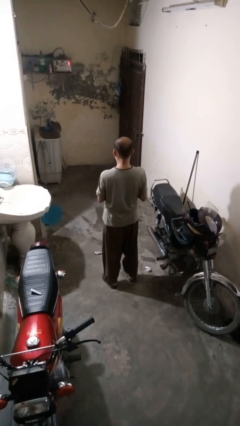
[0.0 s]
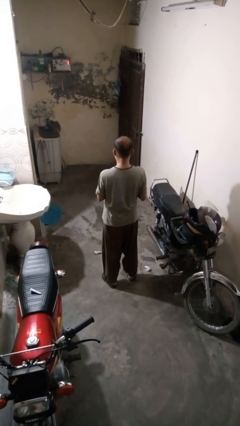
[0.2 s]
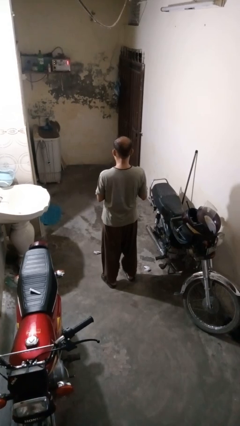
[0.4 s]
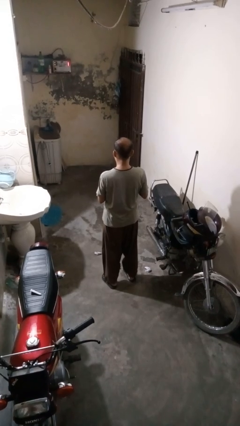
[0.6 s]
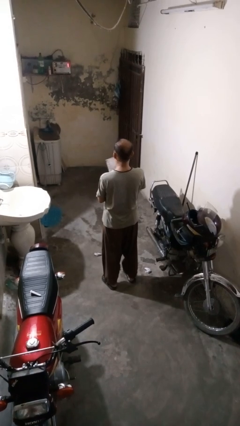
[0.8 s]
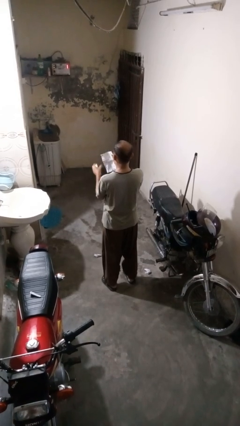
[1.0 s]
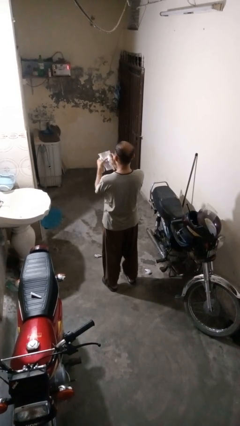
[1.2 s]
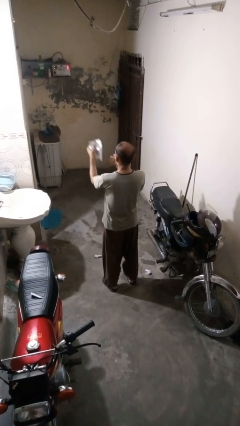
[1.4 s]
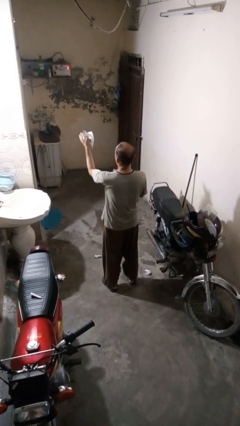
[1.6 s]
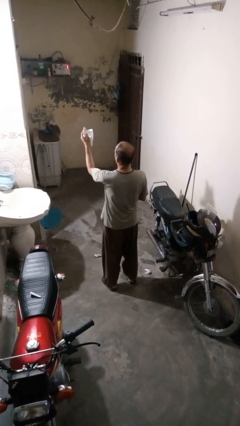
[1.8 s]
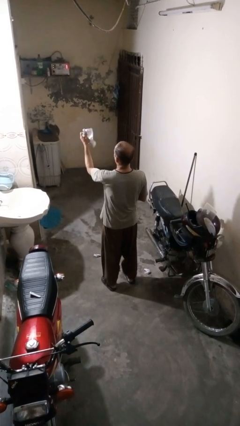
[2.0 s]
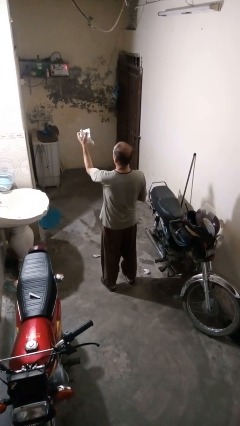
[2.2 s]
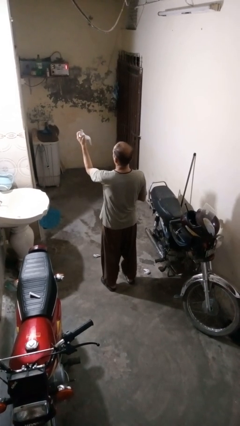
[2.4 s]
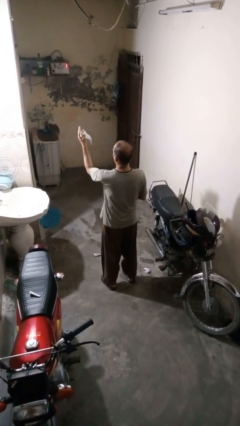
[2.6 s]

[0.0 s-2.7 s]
person crumples paper

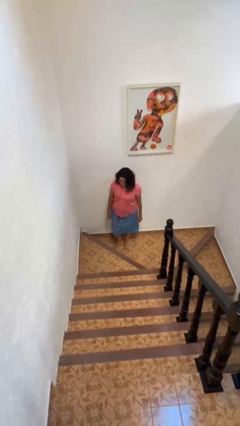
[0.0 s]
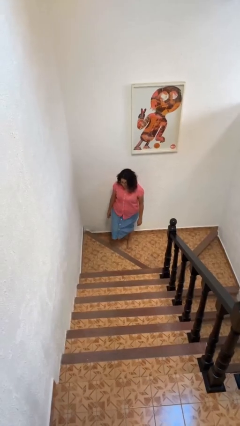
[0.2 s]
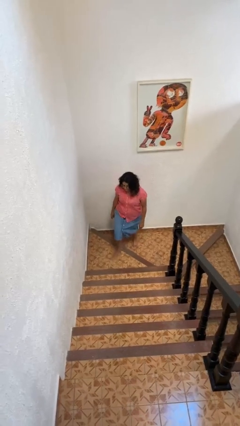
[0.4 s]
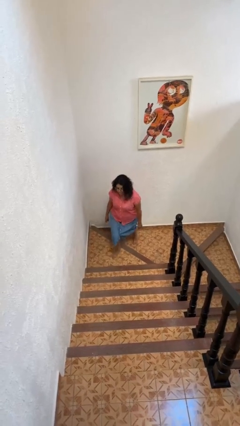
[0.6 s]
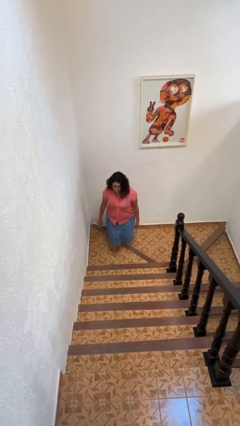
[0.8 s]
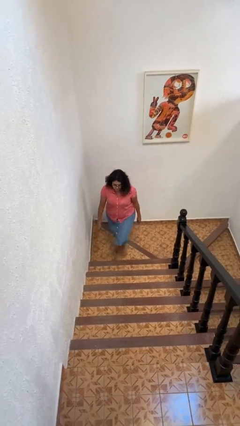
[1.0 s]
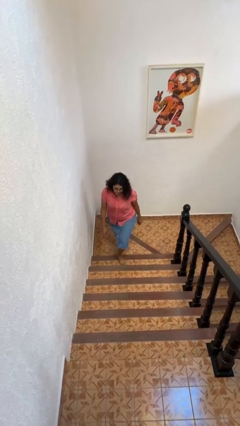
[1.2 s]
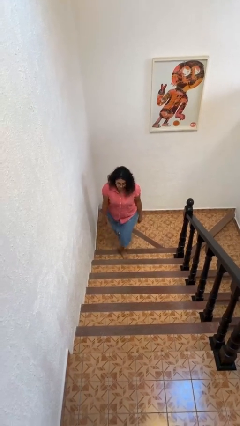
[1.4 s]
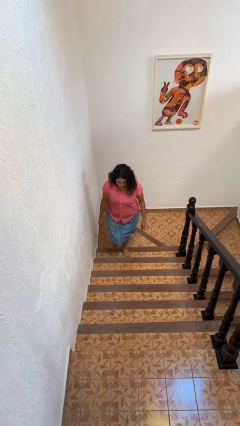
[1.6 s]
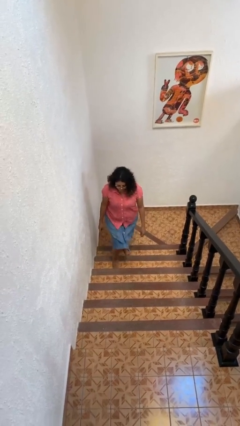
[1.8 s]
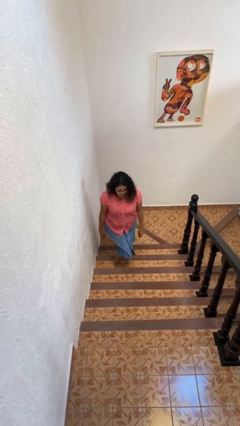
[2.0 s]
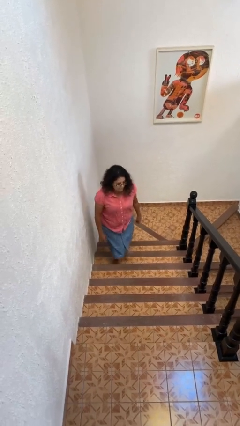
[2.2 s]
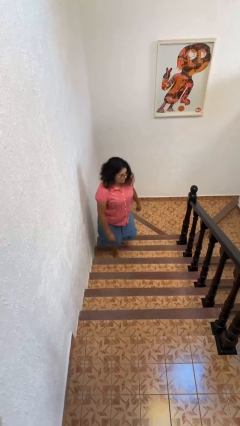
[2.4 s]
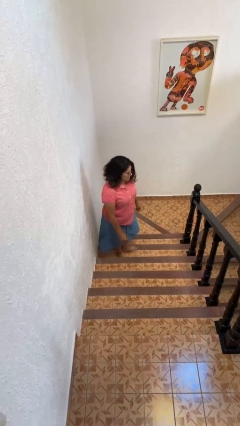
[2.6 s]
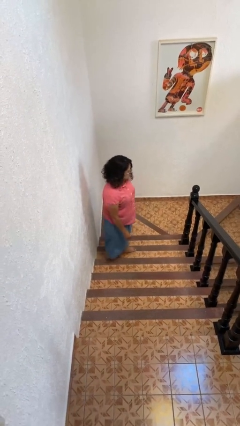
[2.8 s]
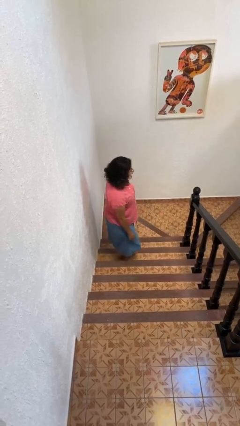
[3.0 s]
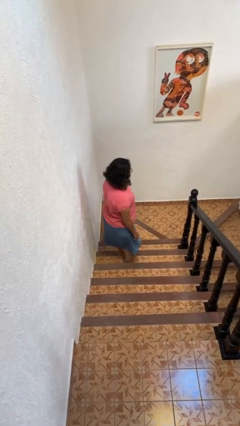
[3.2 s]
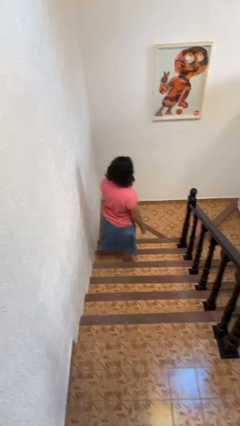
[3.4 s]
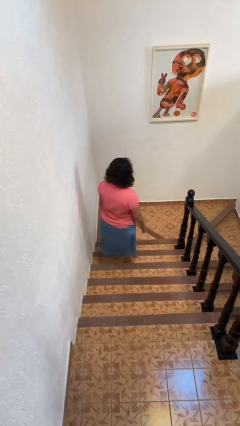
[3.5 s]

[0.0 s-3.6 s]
person climbs up stairs

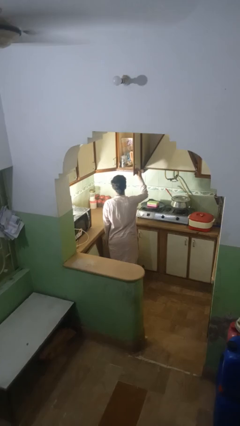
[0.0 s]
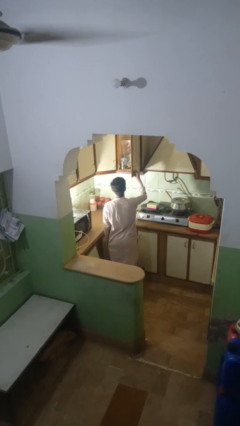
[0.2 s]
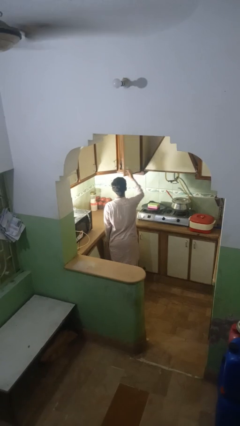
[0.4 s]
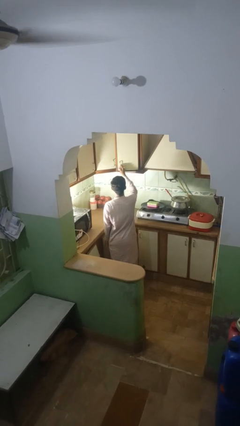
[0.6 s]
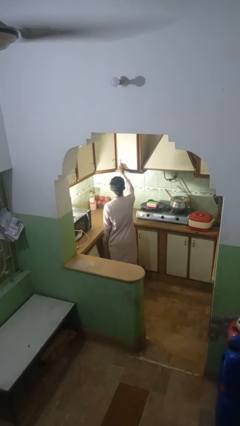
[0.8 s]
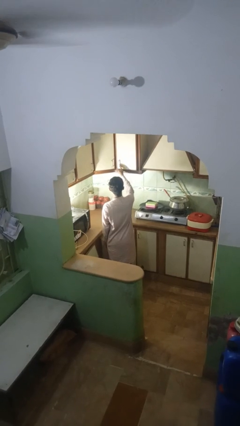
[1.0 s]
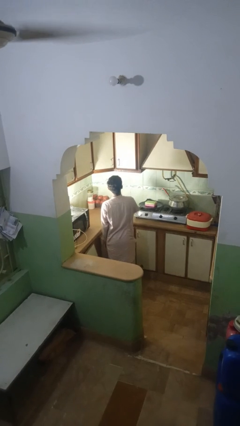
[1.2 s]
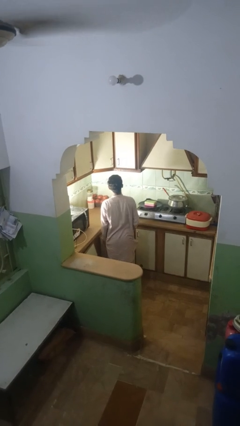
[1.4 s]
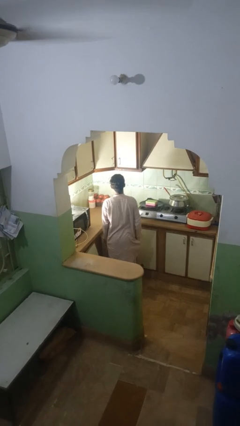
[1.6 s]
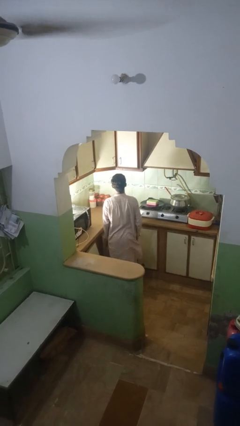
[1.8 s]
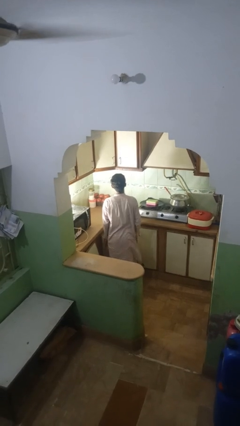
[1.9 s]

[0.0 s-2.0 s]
person closes kitchen drawer

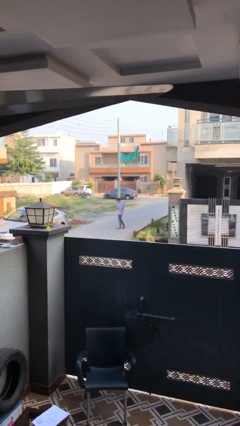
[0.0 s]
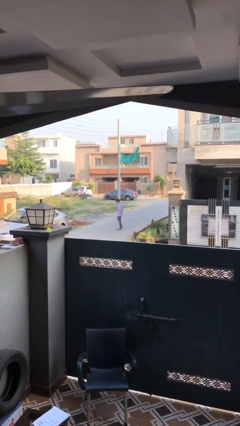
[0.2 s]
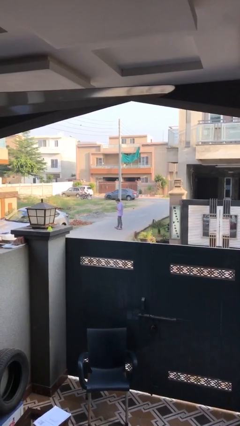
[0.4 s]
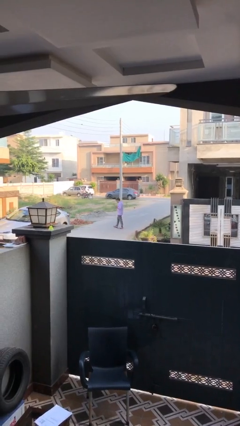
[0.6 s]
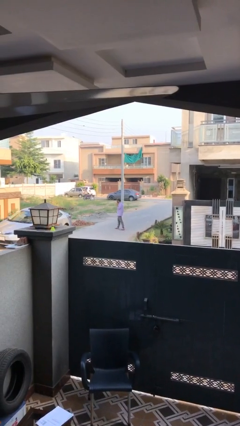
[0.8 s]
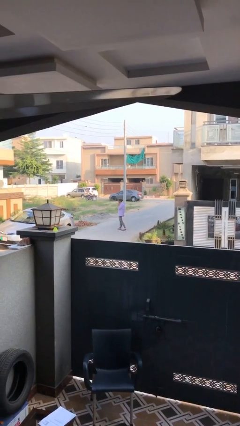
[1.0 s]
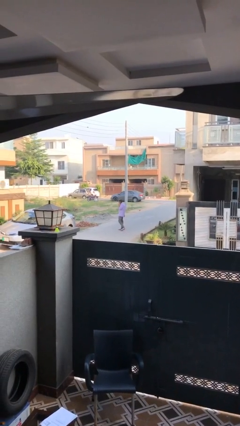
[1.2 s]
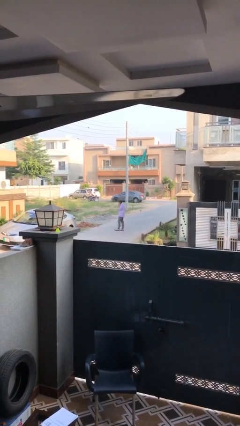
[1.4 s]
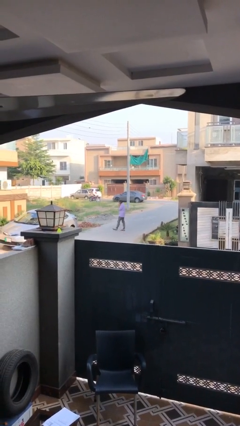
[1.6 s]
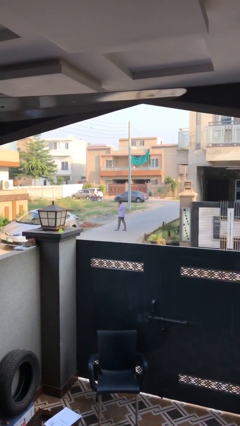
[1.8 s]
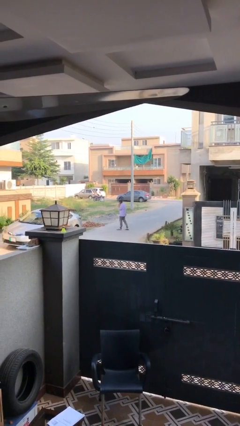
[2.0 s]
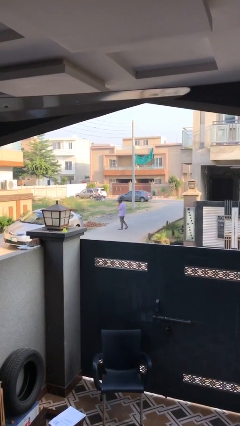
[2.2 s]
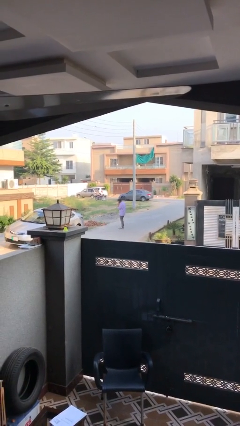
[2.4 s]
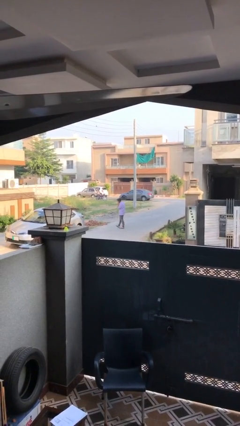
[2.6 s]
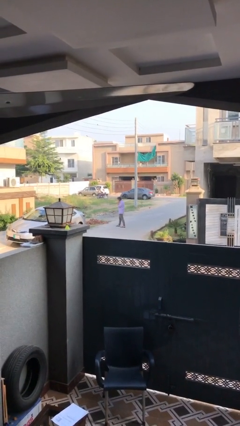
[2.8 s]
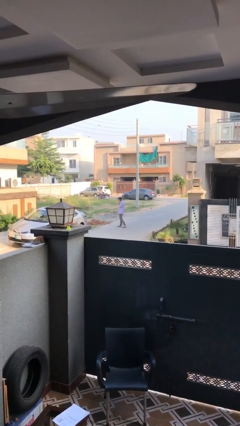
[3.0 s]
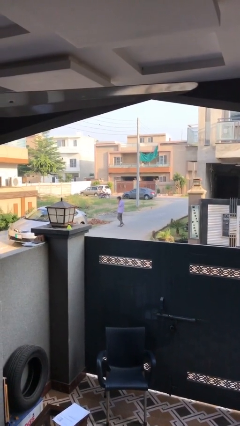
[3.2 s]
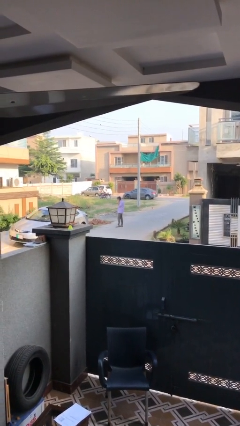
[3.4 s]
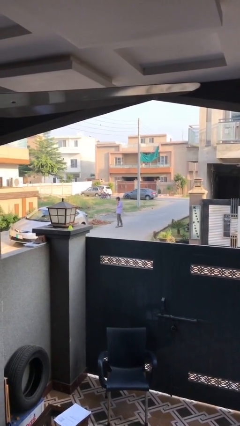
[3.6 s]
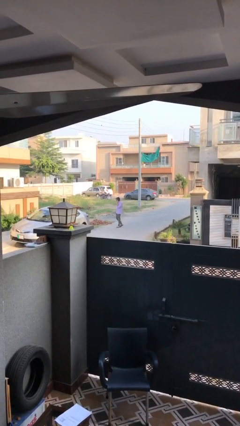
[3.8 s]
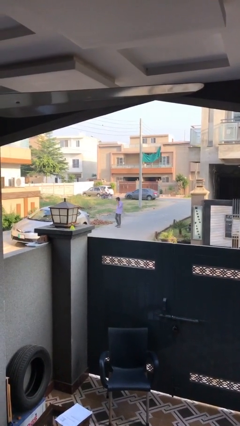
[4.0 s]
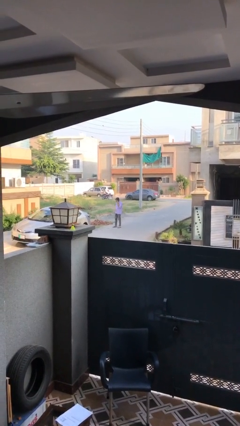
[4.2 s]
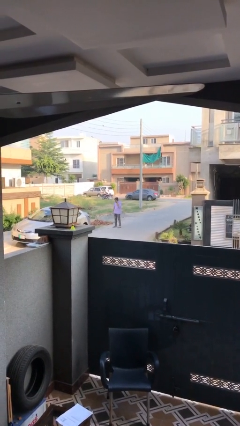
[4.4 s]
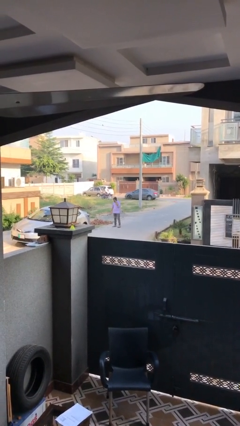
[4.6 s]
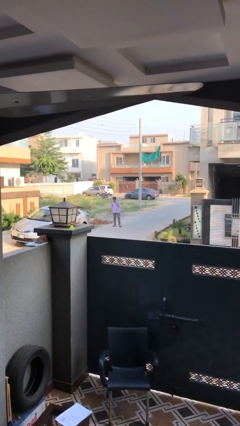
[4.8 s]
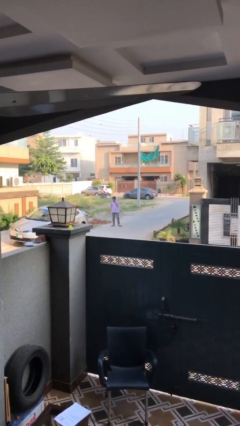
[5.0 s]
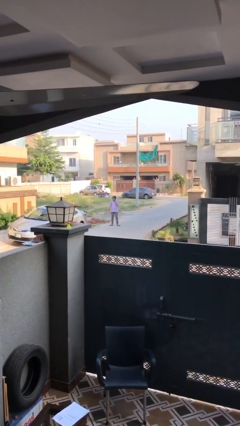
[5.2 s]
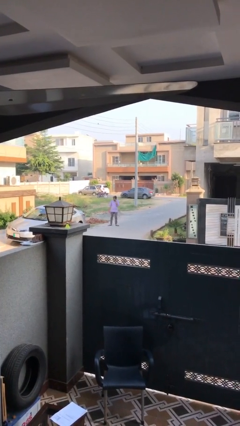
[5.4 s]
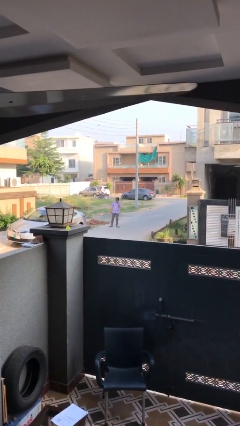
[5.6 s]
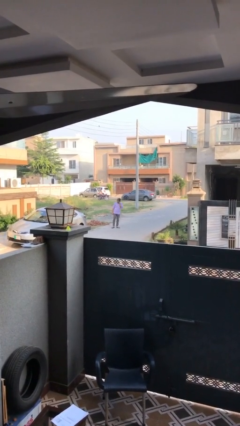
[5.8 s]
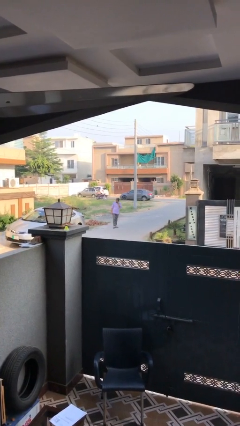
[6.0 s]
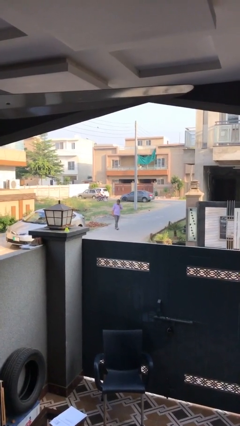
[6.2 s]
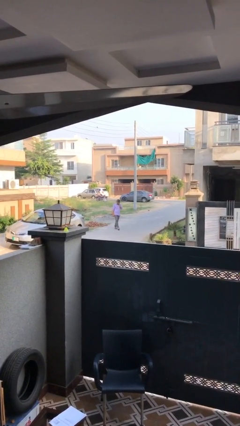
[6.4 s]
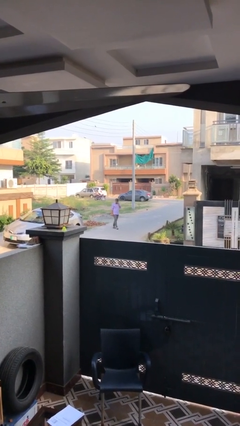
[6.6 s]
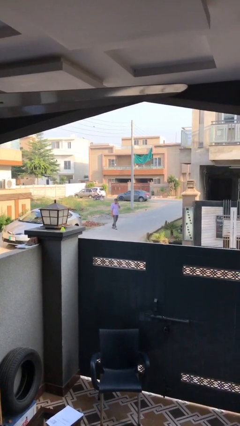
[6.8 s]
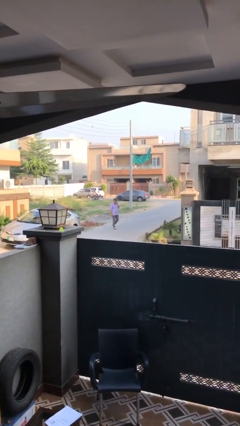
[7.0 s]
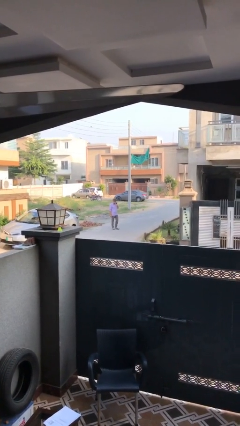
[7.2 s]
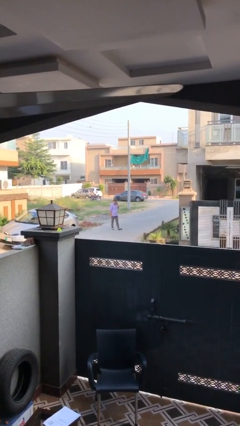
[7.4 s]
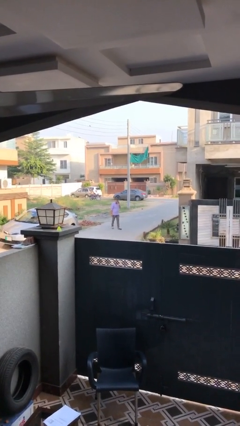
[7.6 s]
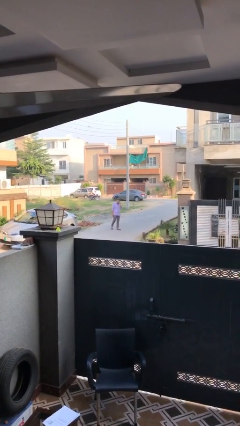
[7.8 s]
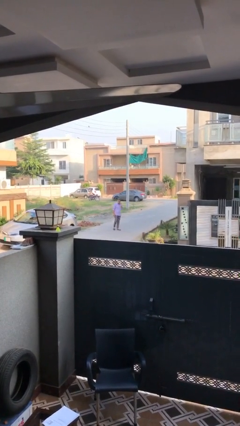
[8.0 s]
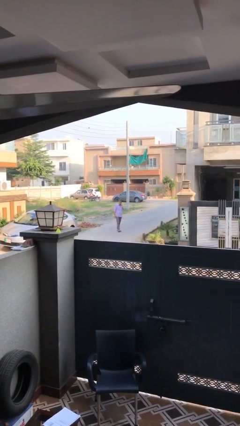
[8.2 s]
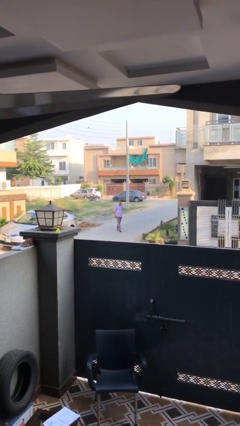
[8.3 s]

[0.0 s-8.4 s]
person talks on phone

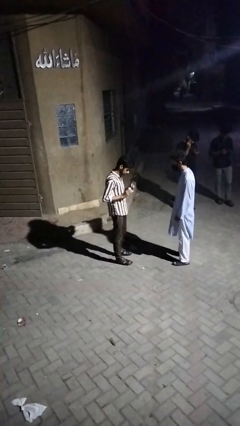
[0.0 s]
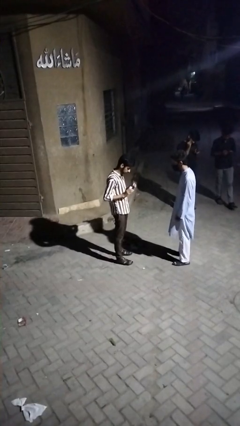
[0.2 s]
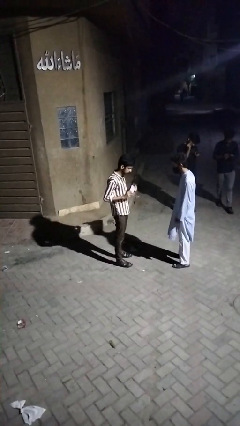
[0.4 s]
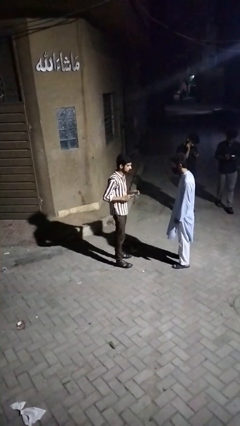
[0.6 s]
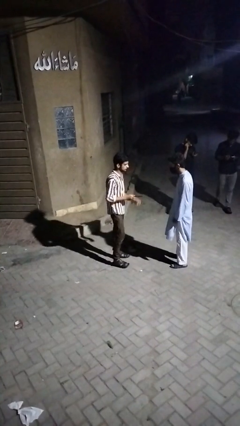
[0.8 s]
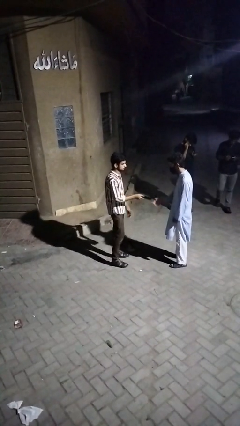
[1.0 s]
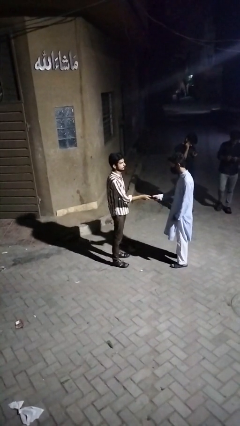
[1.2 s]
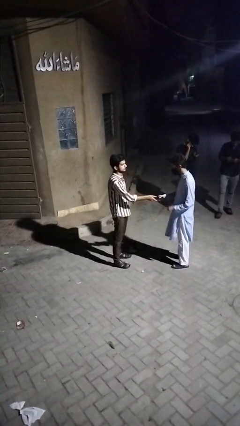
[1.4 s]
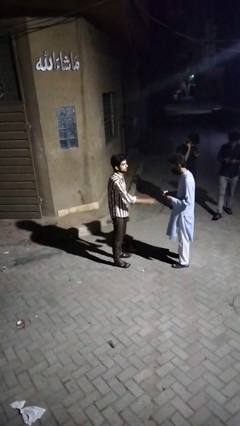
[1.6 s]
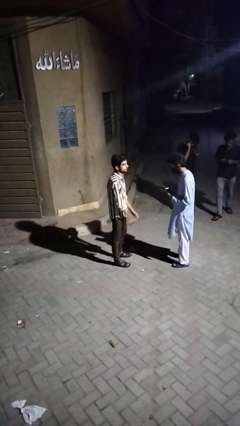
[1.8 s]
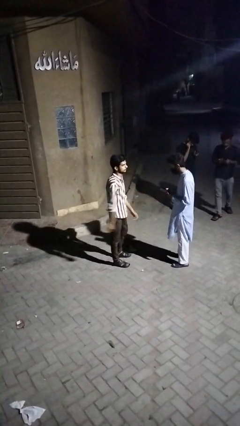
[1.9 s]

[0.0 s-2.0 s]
person transfers object to person
